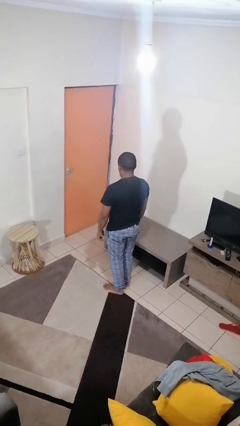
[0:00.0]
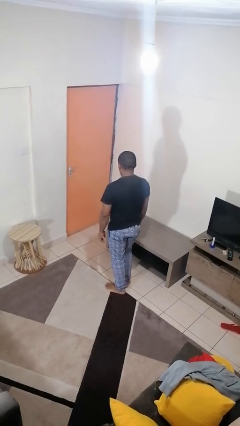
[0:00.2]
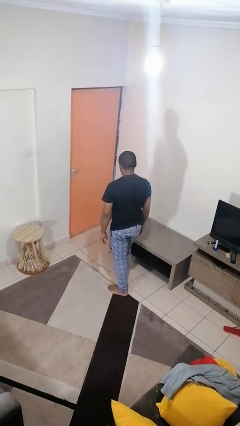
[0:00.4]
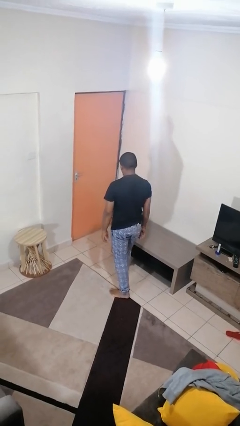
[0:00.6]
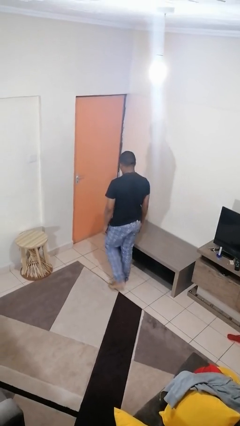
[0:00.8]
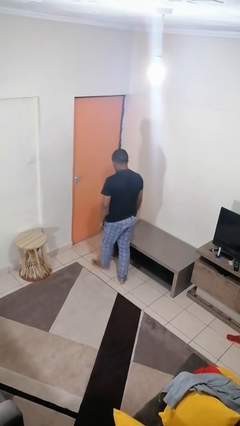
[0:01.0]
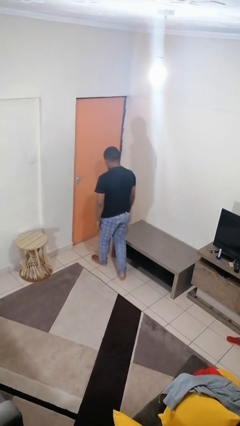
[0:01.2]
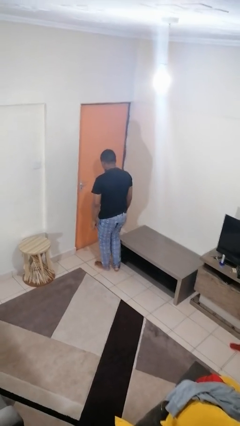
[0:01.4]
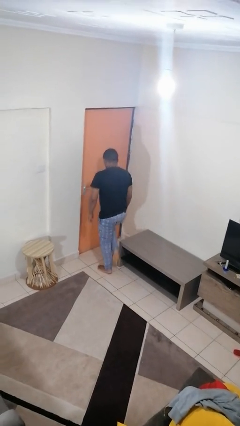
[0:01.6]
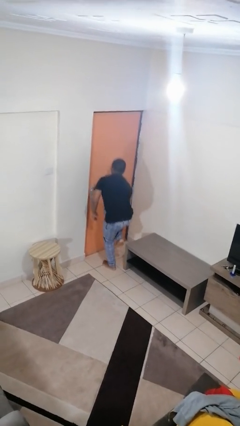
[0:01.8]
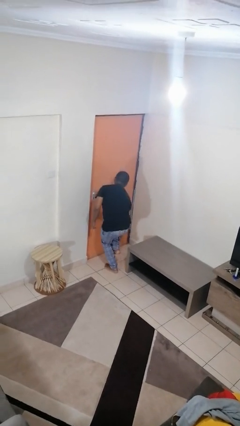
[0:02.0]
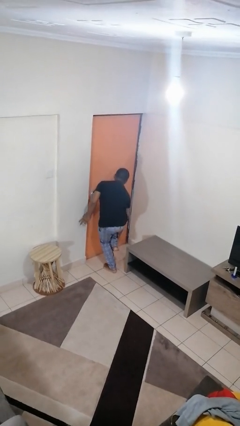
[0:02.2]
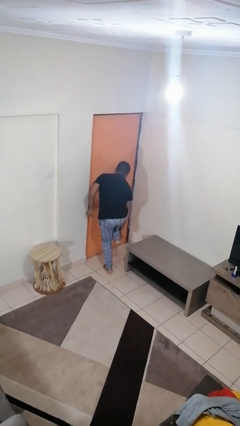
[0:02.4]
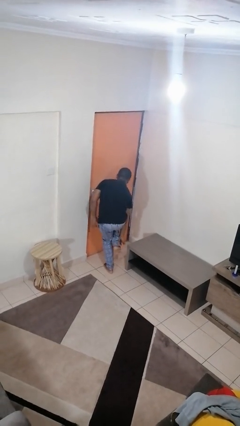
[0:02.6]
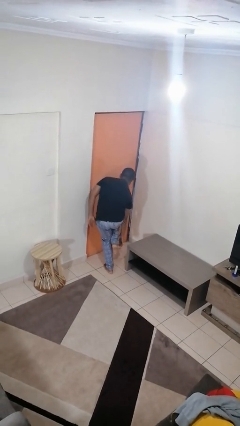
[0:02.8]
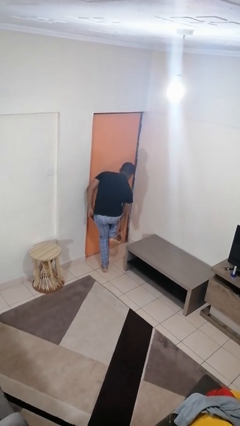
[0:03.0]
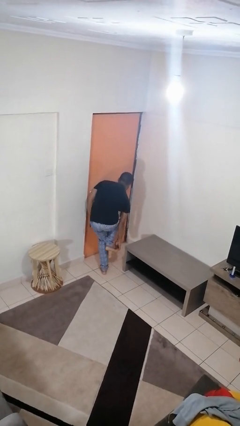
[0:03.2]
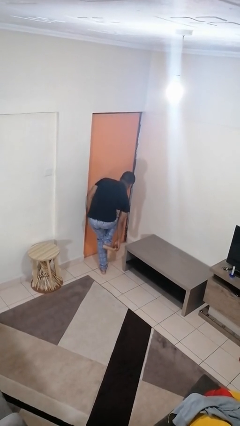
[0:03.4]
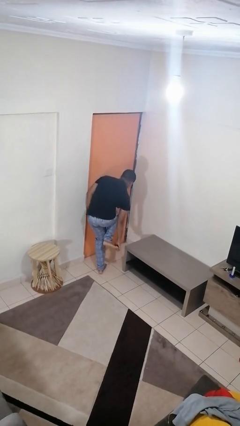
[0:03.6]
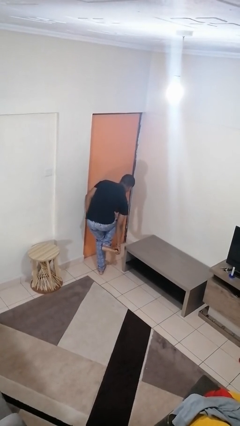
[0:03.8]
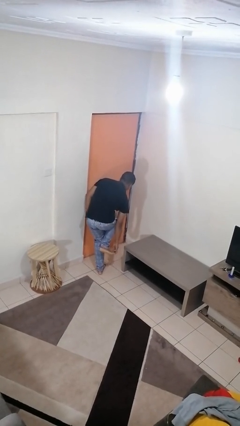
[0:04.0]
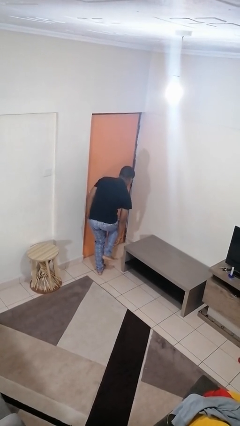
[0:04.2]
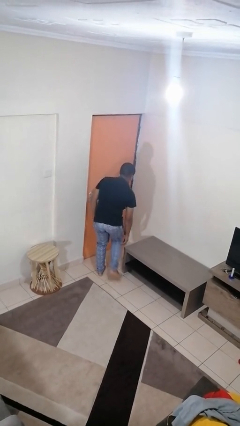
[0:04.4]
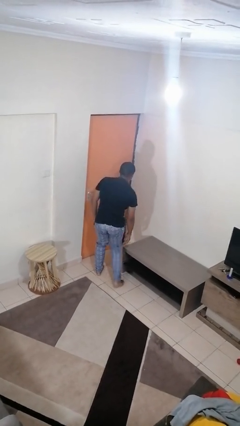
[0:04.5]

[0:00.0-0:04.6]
person stubs toe

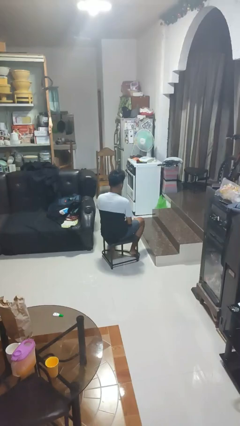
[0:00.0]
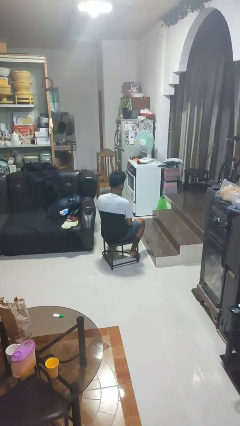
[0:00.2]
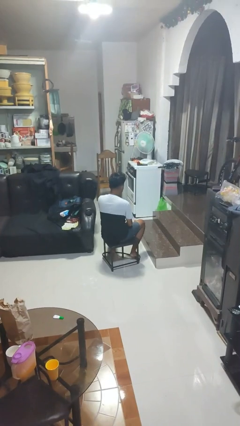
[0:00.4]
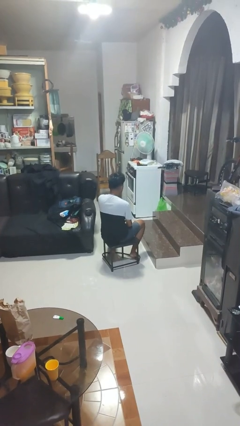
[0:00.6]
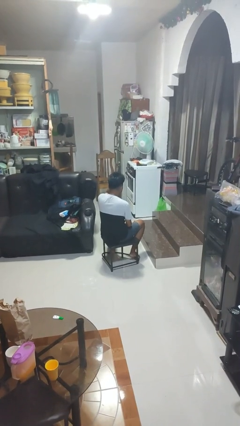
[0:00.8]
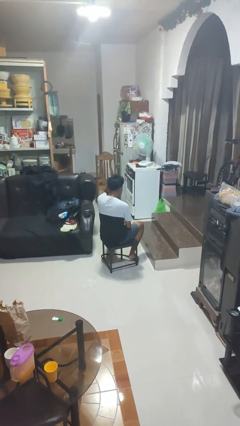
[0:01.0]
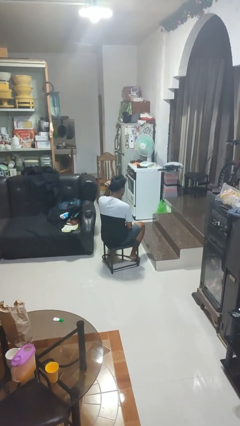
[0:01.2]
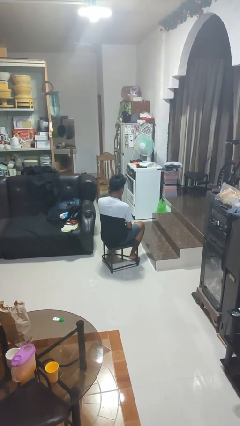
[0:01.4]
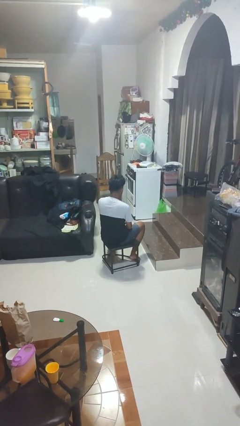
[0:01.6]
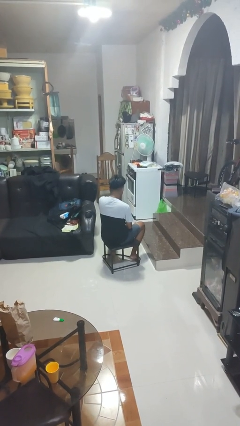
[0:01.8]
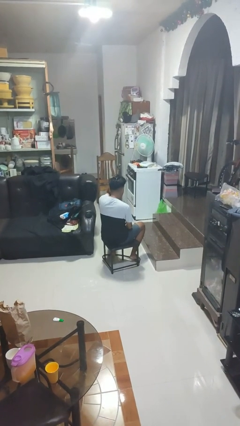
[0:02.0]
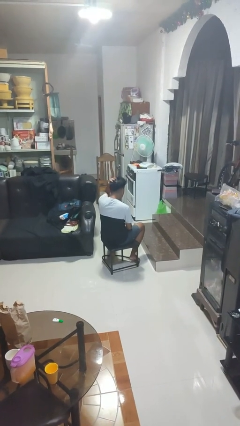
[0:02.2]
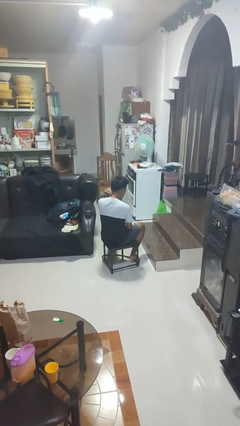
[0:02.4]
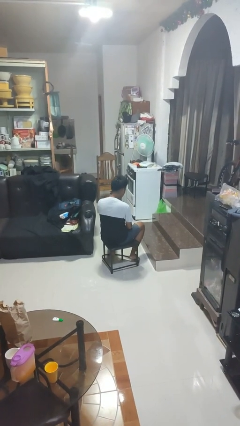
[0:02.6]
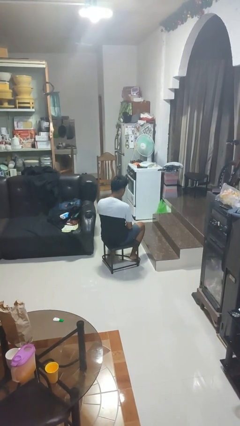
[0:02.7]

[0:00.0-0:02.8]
person strokes hair

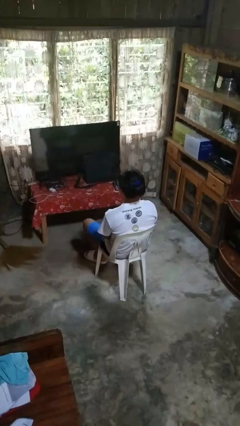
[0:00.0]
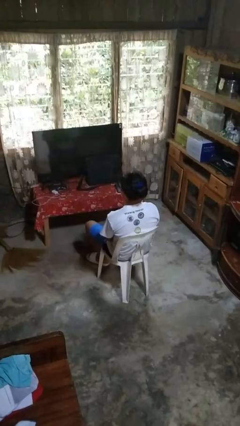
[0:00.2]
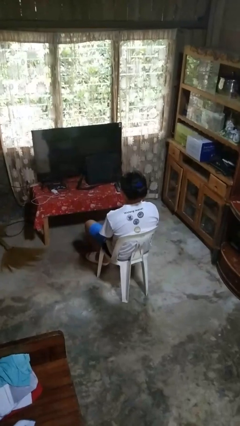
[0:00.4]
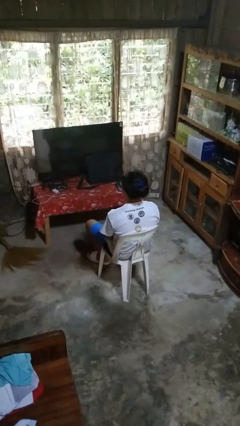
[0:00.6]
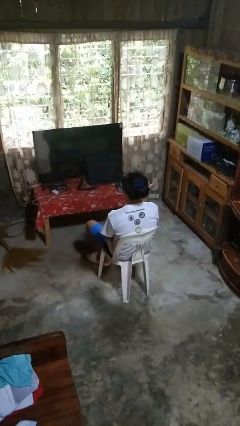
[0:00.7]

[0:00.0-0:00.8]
person gestures swipe left

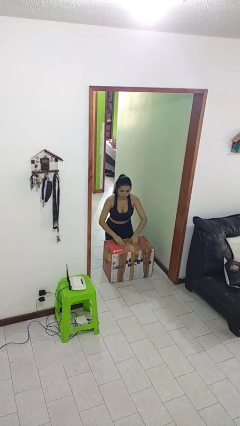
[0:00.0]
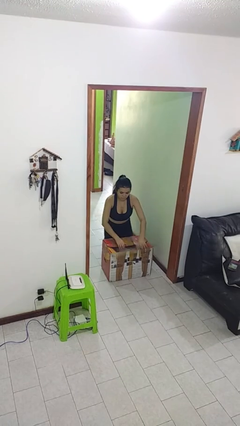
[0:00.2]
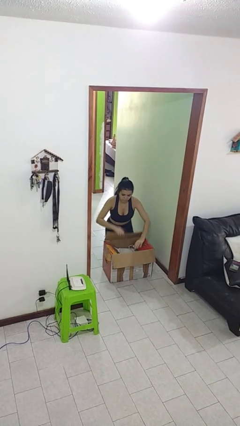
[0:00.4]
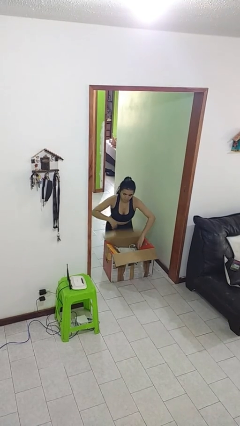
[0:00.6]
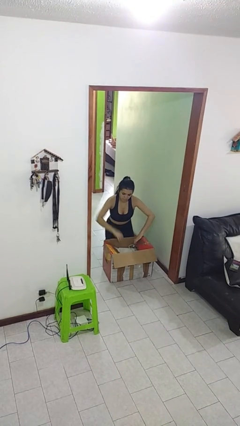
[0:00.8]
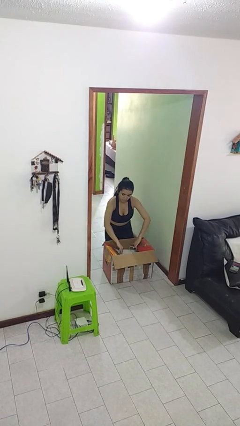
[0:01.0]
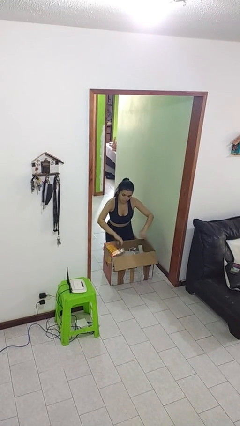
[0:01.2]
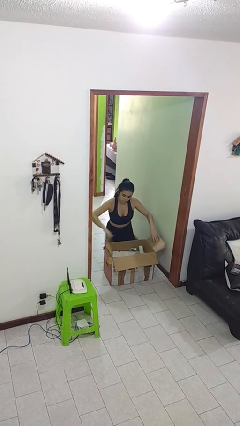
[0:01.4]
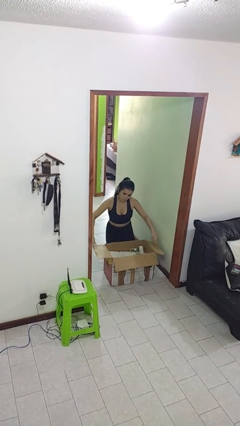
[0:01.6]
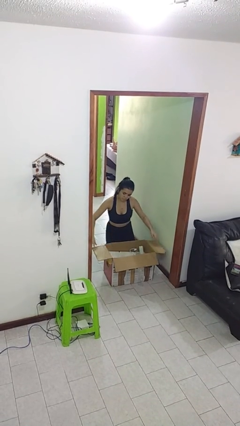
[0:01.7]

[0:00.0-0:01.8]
person opens box

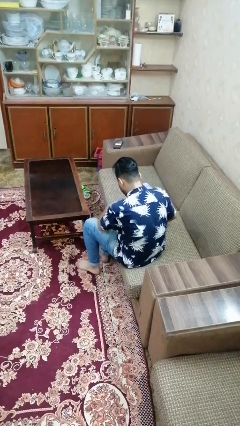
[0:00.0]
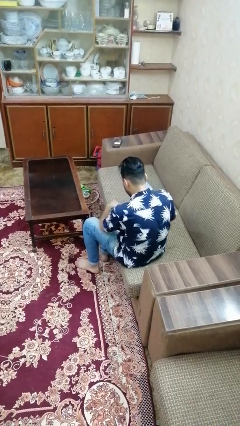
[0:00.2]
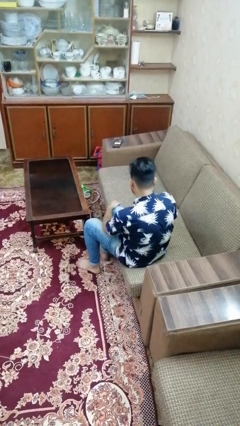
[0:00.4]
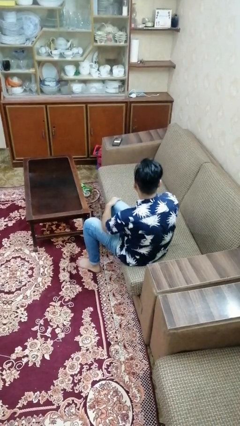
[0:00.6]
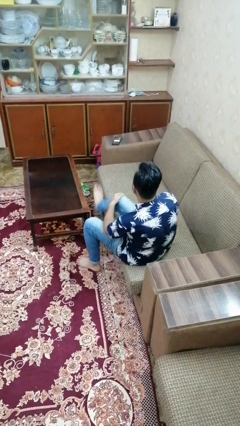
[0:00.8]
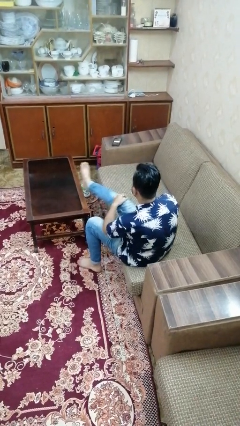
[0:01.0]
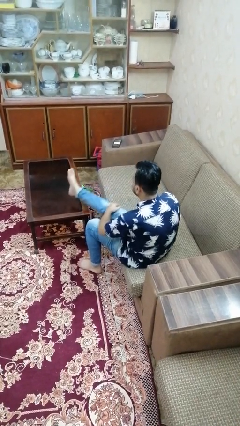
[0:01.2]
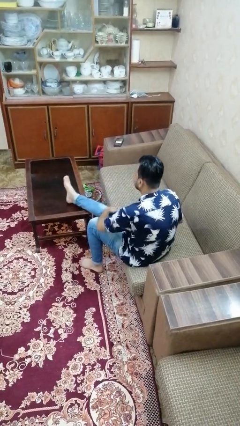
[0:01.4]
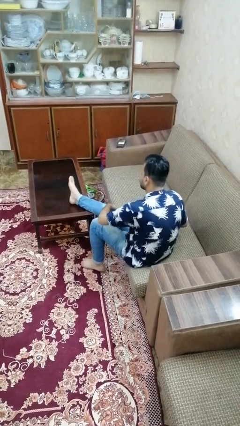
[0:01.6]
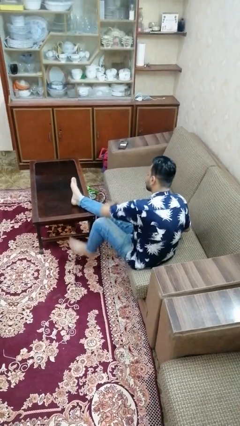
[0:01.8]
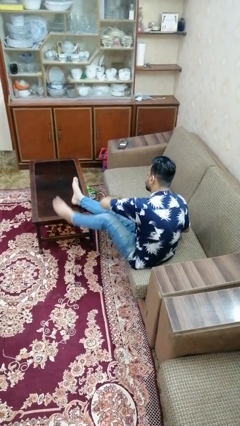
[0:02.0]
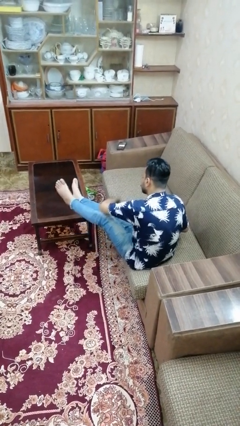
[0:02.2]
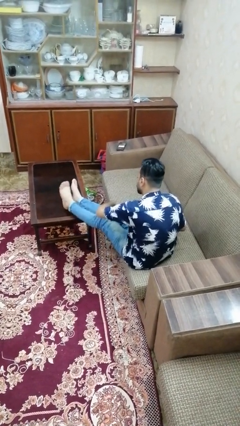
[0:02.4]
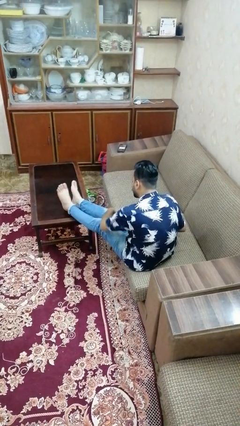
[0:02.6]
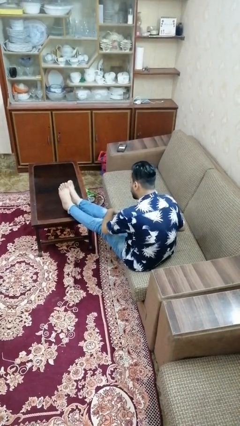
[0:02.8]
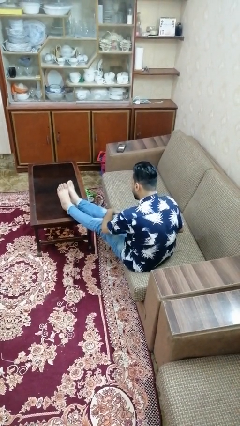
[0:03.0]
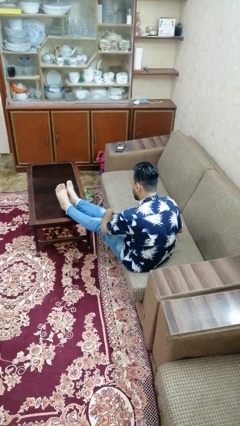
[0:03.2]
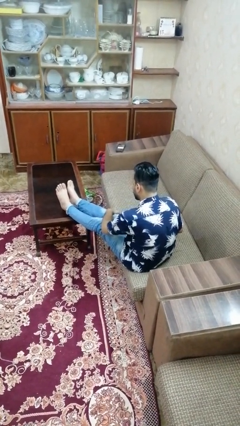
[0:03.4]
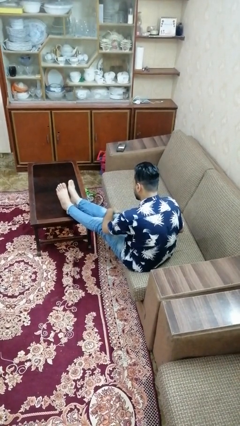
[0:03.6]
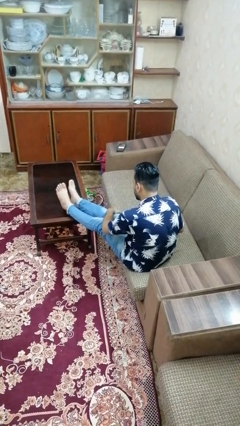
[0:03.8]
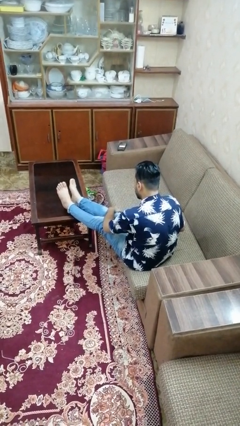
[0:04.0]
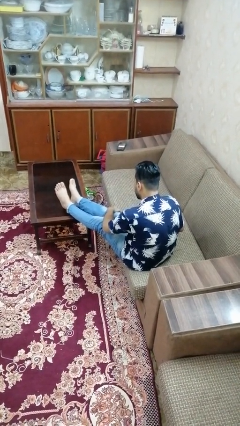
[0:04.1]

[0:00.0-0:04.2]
person puts feet up

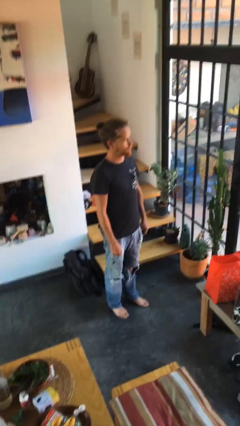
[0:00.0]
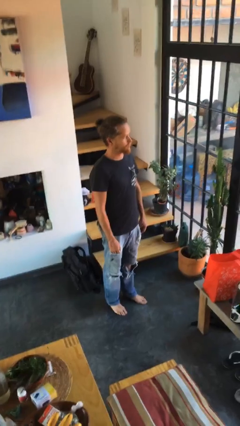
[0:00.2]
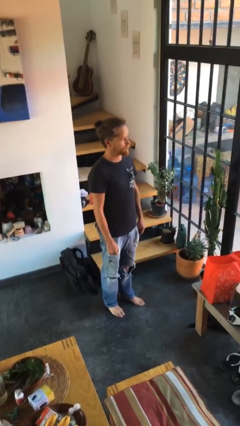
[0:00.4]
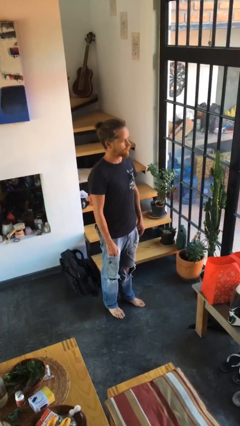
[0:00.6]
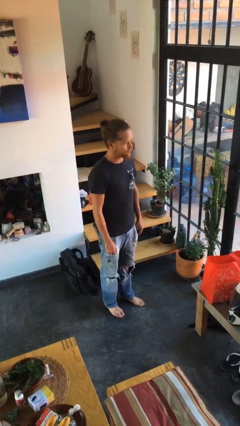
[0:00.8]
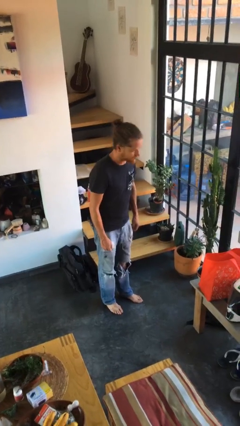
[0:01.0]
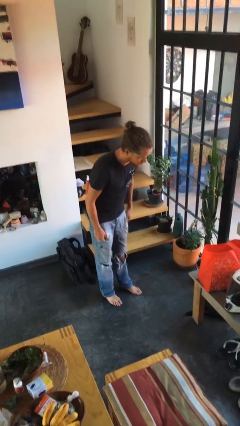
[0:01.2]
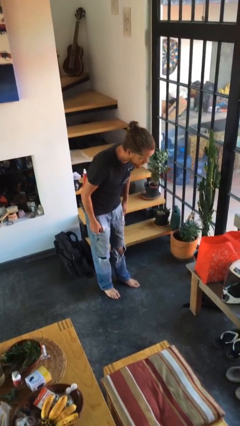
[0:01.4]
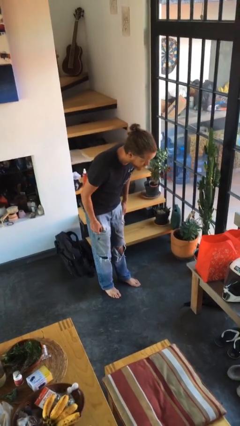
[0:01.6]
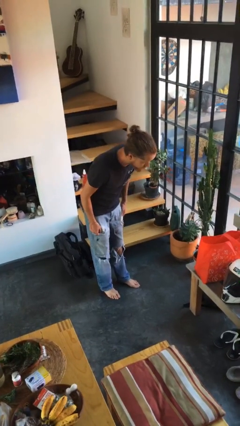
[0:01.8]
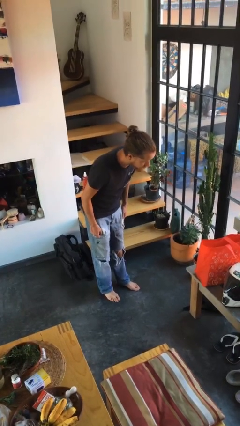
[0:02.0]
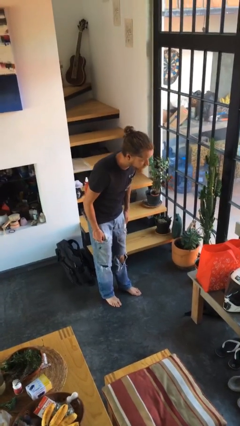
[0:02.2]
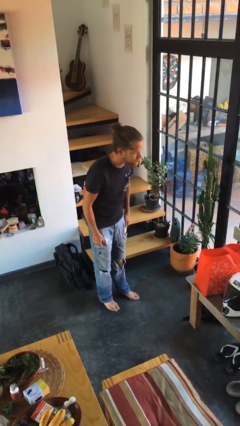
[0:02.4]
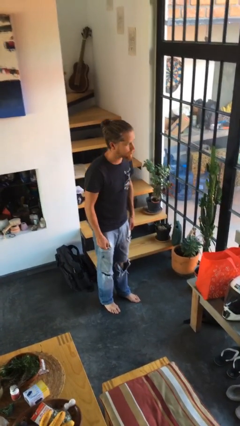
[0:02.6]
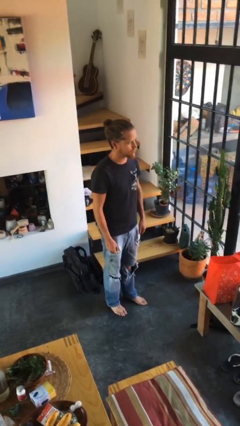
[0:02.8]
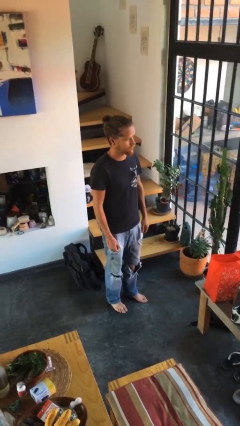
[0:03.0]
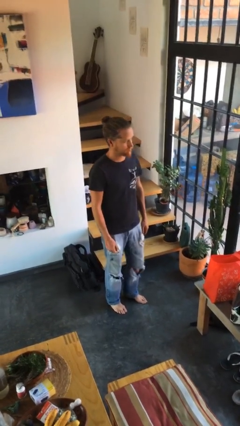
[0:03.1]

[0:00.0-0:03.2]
person bows
